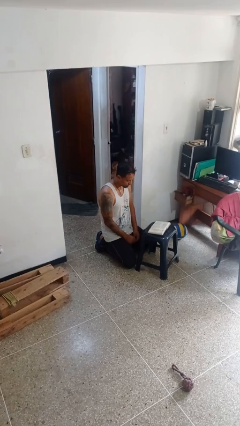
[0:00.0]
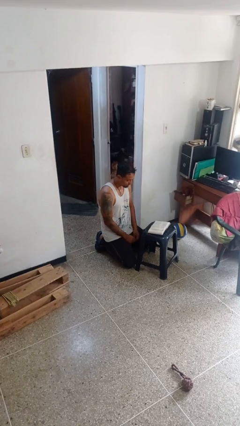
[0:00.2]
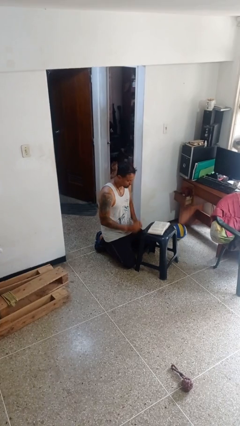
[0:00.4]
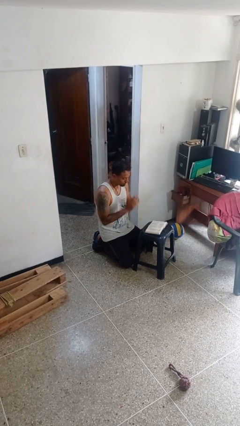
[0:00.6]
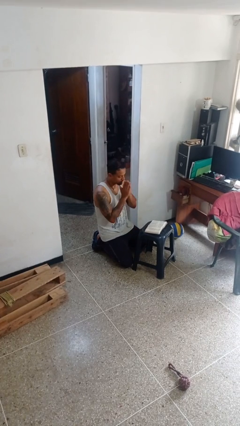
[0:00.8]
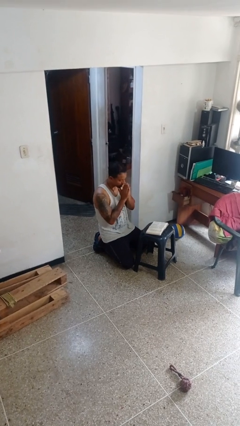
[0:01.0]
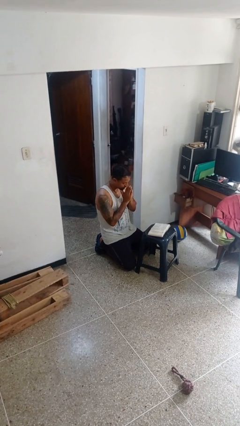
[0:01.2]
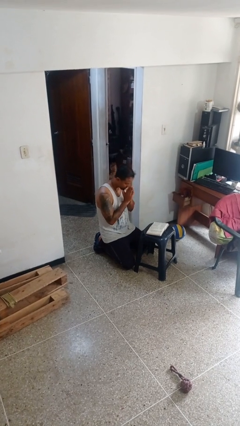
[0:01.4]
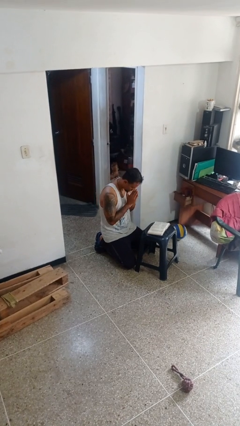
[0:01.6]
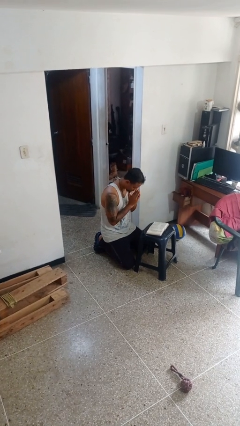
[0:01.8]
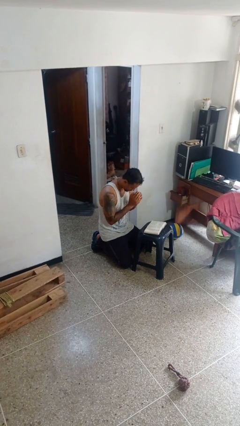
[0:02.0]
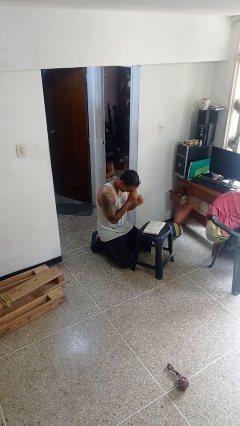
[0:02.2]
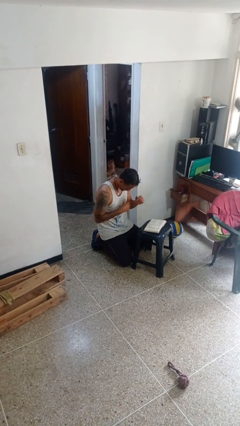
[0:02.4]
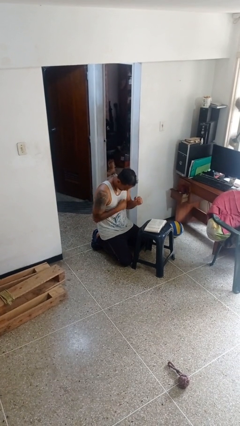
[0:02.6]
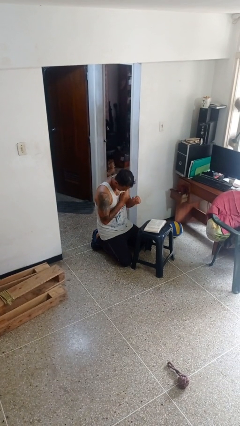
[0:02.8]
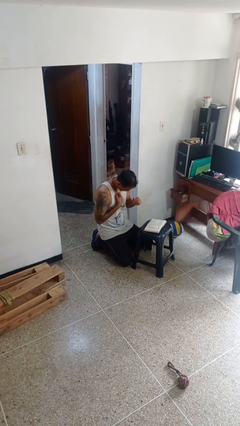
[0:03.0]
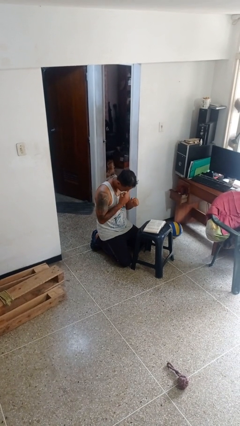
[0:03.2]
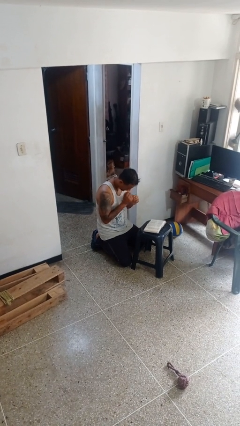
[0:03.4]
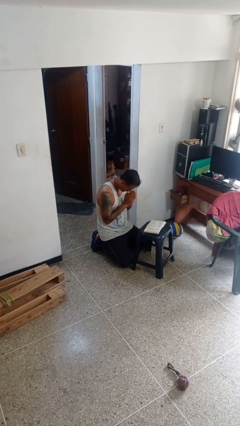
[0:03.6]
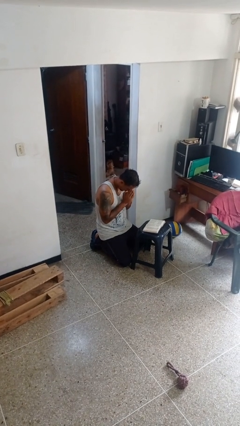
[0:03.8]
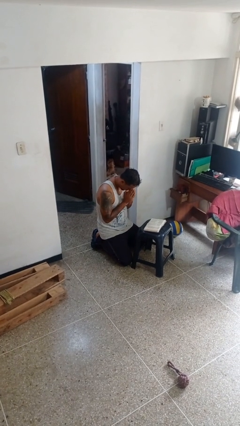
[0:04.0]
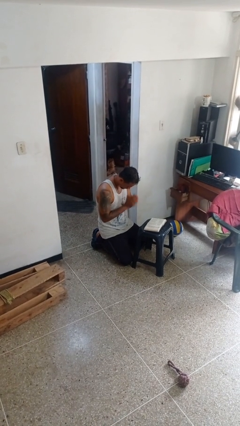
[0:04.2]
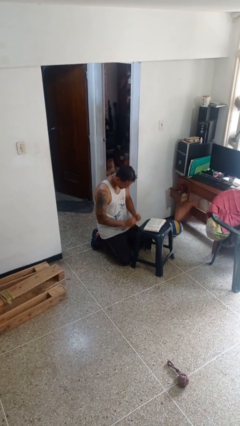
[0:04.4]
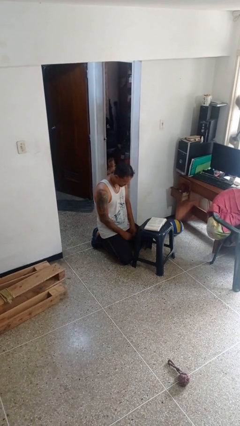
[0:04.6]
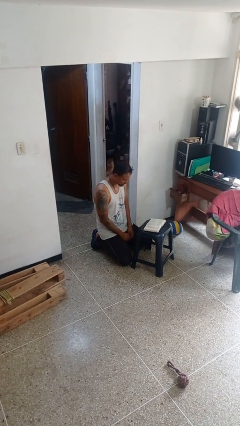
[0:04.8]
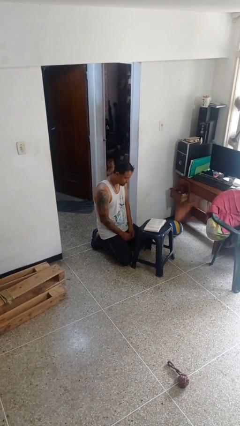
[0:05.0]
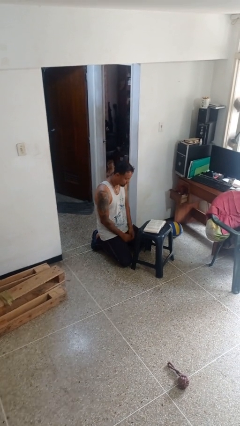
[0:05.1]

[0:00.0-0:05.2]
person prays

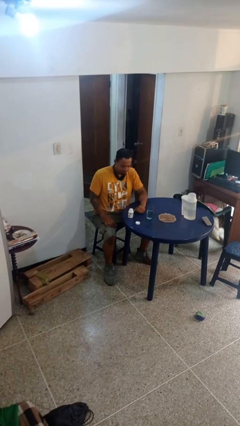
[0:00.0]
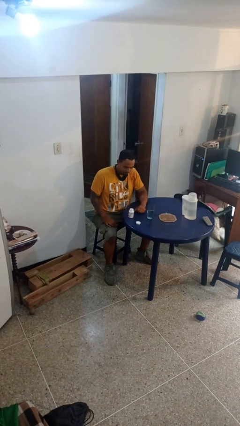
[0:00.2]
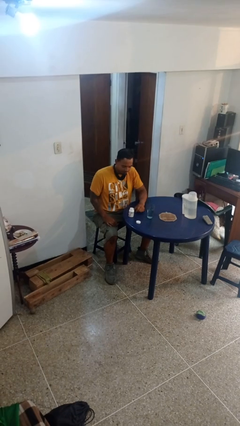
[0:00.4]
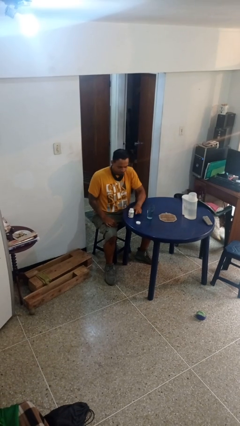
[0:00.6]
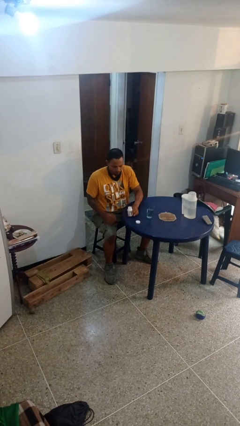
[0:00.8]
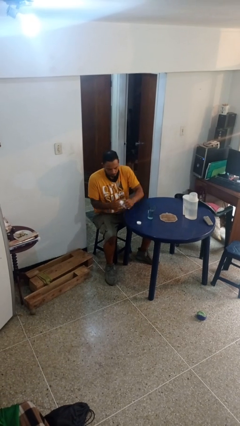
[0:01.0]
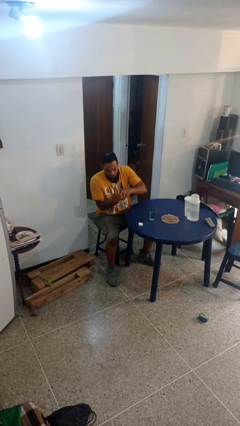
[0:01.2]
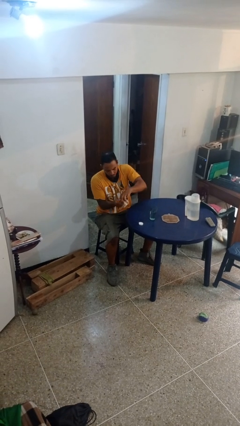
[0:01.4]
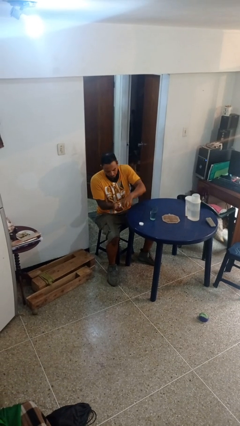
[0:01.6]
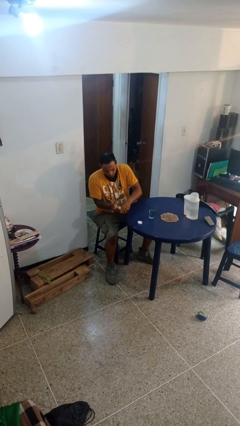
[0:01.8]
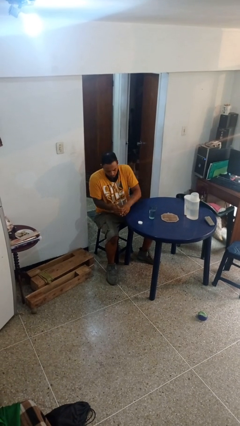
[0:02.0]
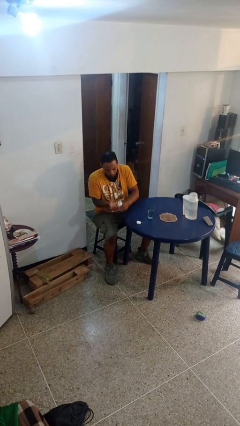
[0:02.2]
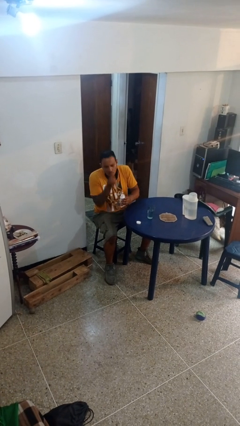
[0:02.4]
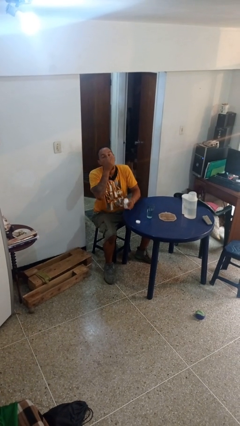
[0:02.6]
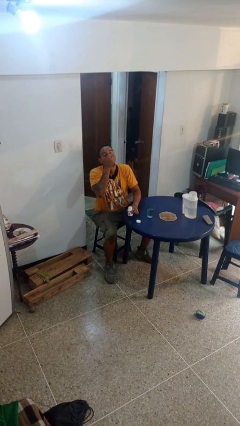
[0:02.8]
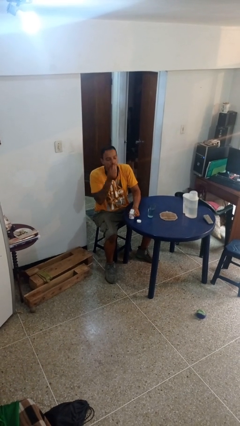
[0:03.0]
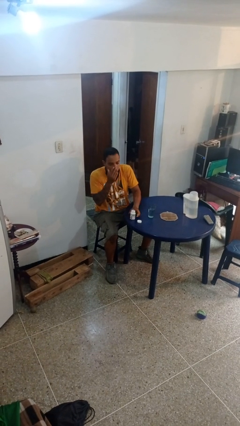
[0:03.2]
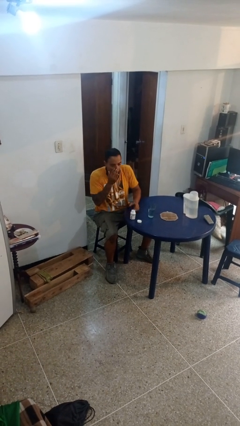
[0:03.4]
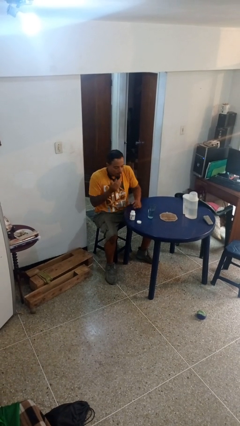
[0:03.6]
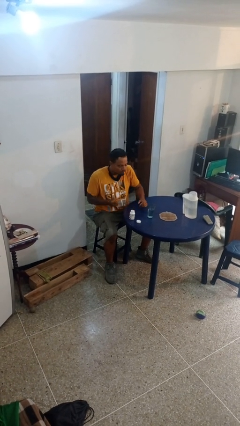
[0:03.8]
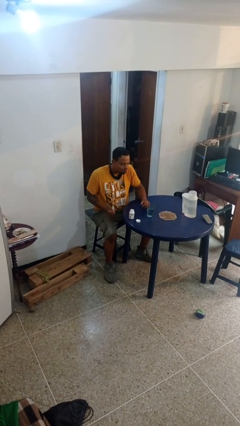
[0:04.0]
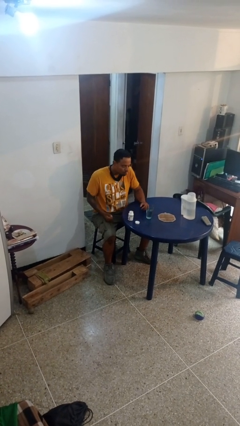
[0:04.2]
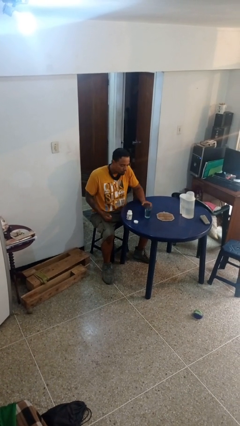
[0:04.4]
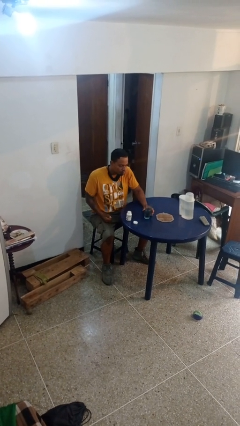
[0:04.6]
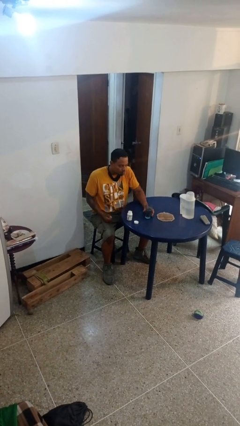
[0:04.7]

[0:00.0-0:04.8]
person takes medicine pills

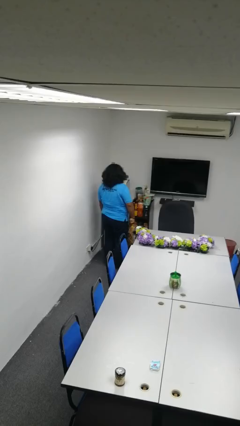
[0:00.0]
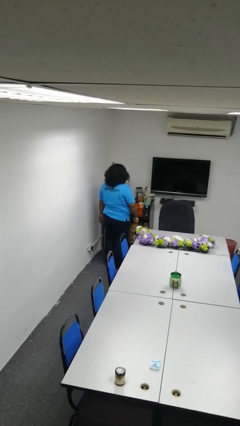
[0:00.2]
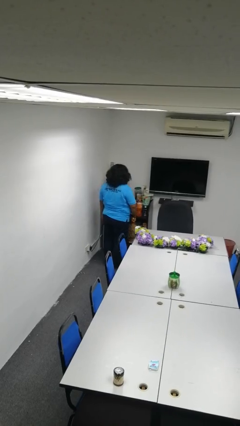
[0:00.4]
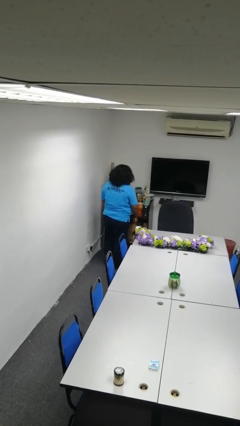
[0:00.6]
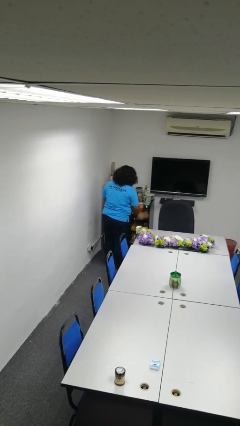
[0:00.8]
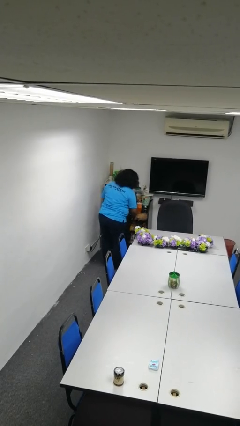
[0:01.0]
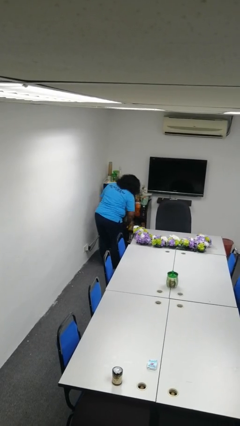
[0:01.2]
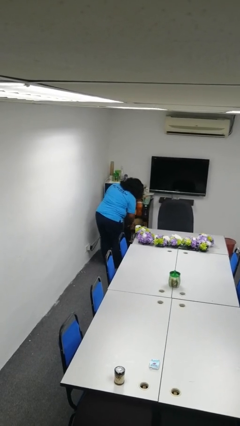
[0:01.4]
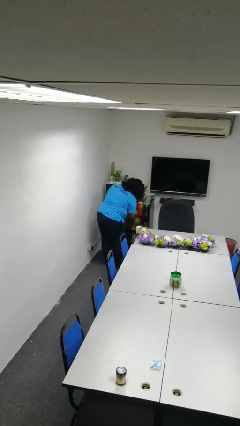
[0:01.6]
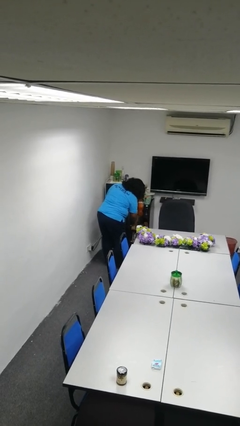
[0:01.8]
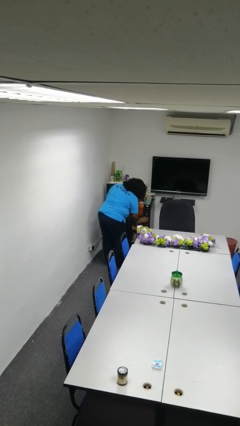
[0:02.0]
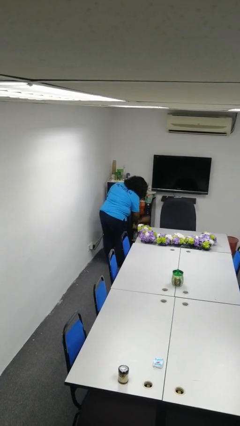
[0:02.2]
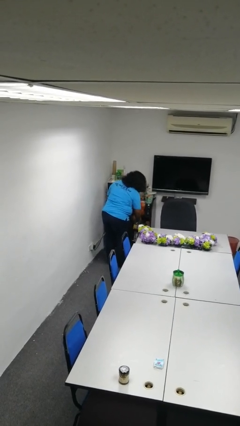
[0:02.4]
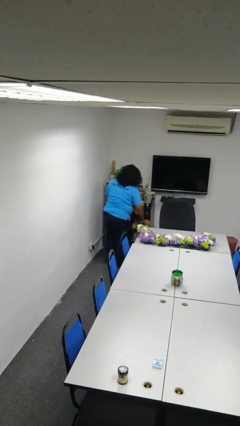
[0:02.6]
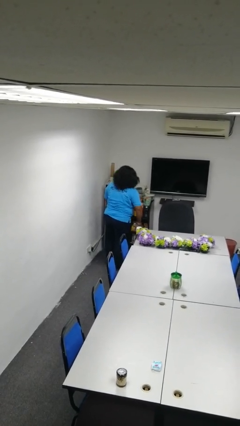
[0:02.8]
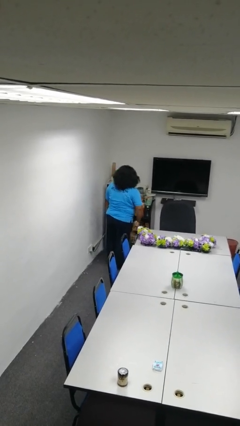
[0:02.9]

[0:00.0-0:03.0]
person dusts furniture

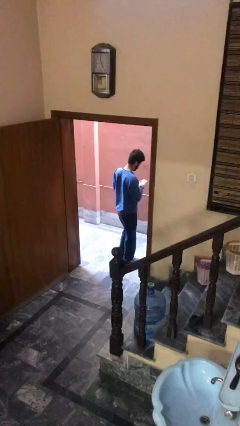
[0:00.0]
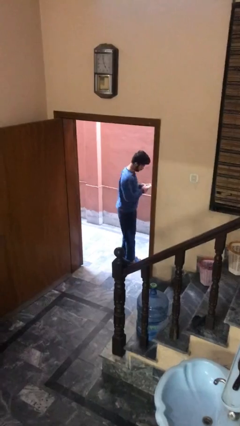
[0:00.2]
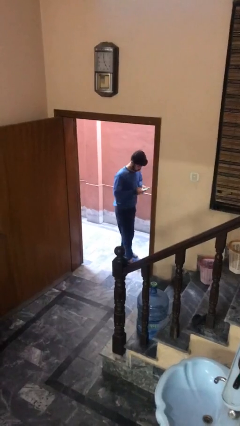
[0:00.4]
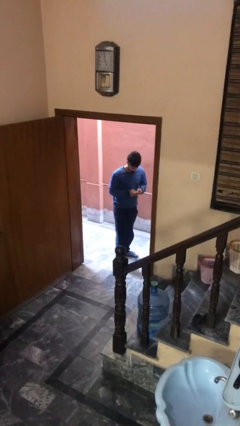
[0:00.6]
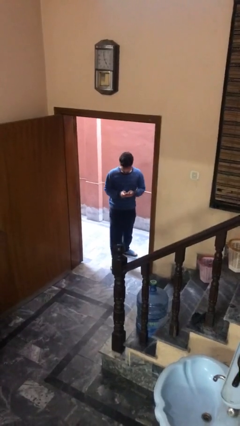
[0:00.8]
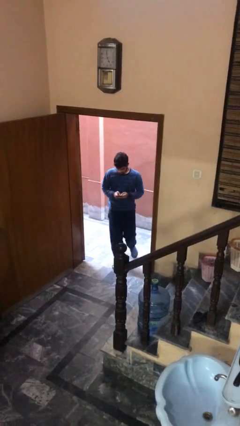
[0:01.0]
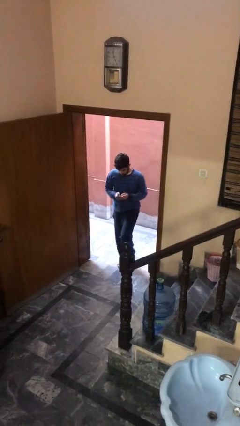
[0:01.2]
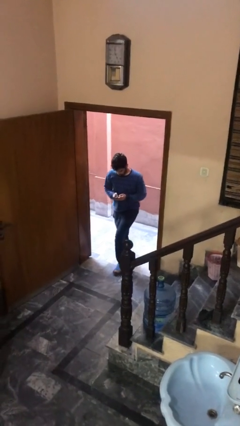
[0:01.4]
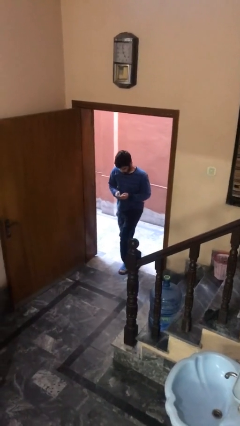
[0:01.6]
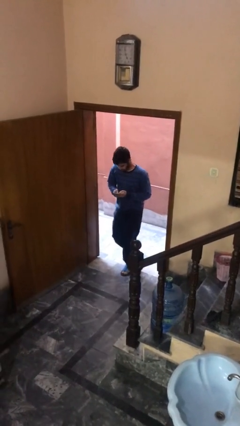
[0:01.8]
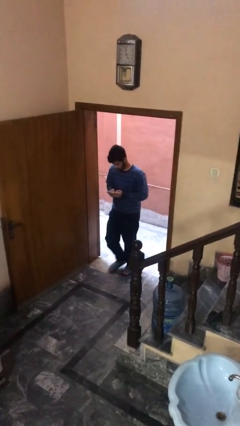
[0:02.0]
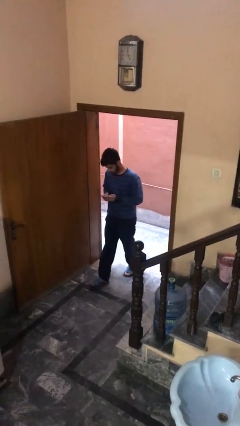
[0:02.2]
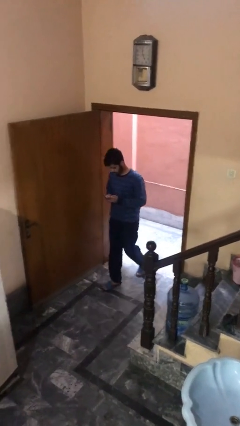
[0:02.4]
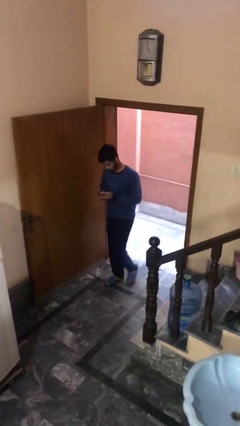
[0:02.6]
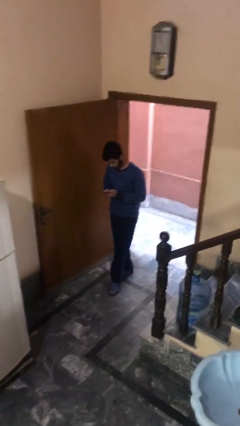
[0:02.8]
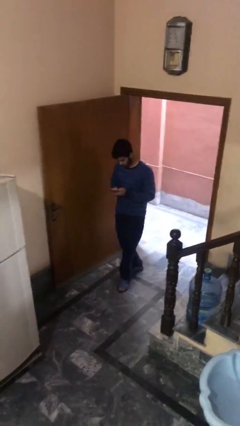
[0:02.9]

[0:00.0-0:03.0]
person enters scene through structure

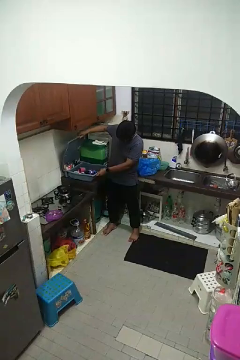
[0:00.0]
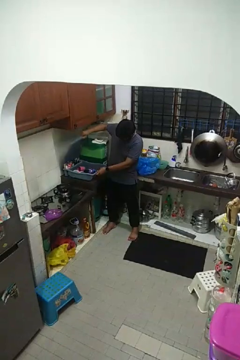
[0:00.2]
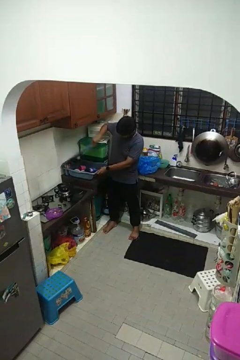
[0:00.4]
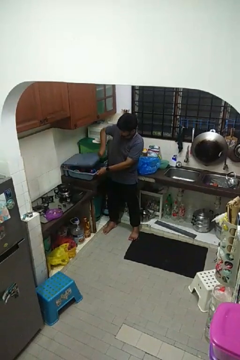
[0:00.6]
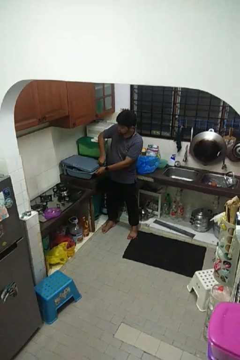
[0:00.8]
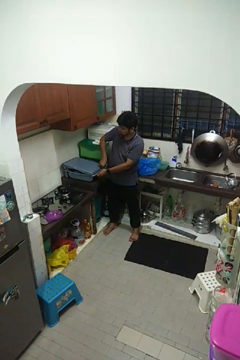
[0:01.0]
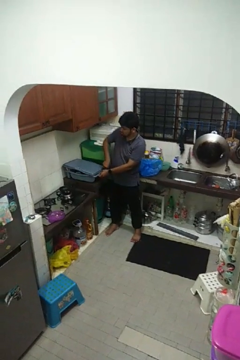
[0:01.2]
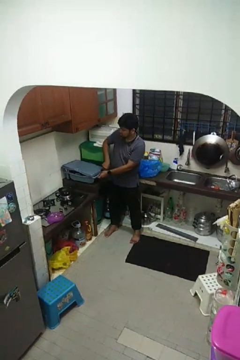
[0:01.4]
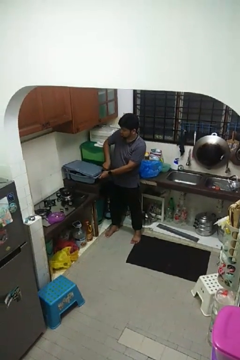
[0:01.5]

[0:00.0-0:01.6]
person closes dishwasher
